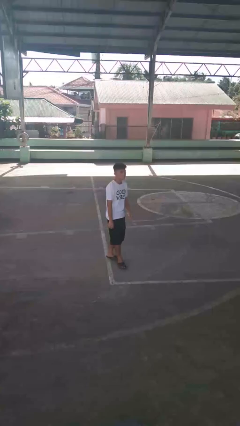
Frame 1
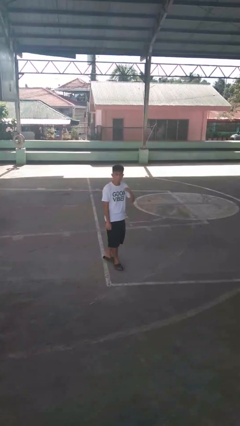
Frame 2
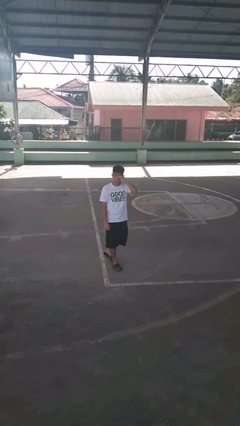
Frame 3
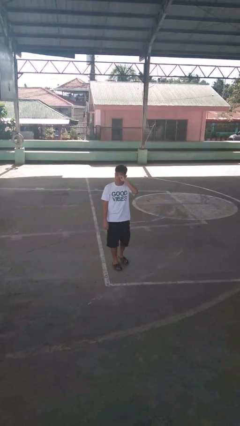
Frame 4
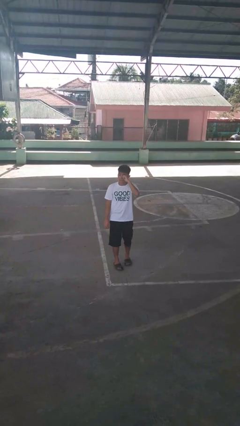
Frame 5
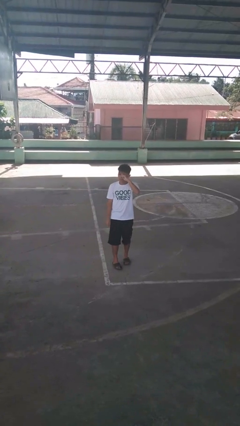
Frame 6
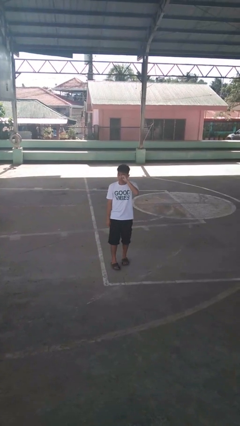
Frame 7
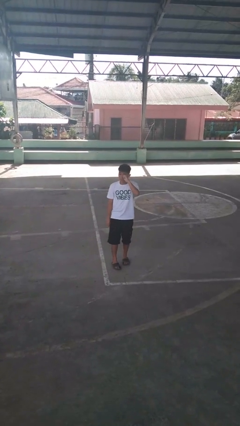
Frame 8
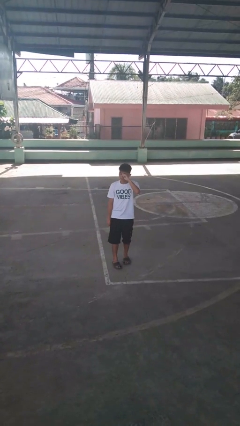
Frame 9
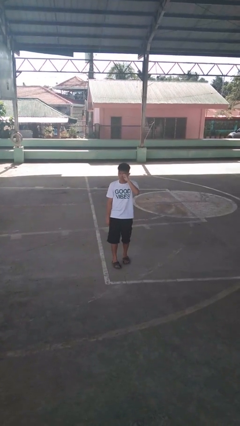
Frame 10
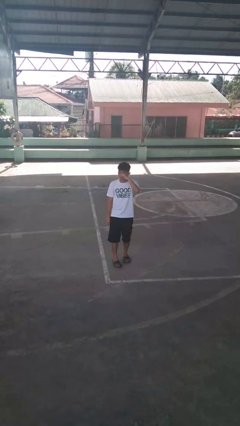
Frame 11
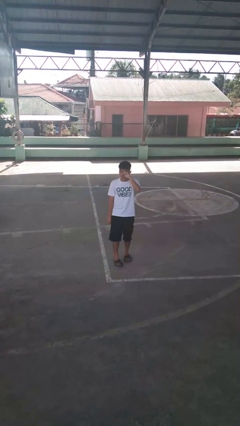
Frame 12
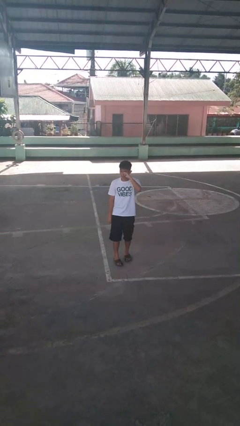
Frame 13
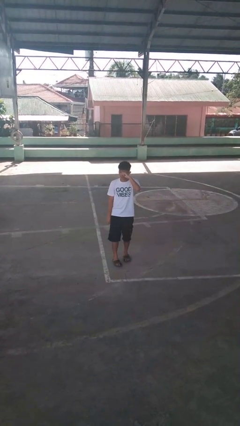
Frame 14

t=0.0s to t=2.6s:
person rubs eyes

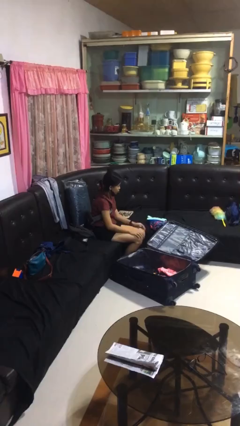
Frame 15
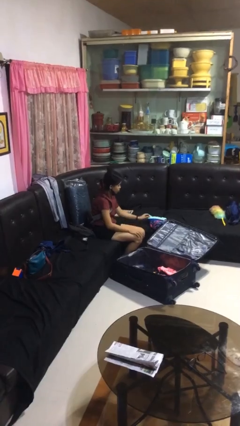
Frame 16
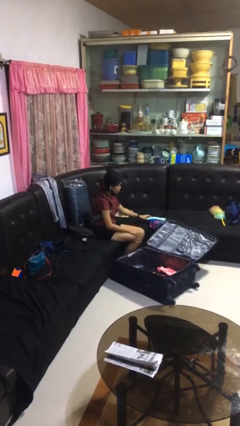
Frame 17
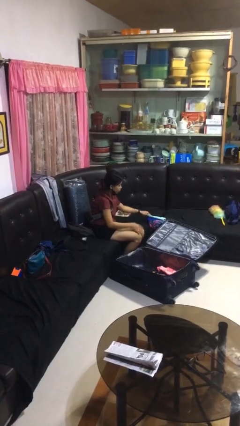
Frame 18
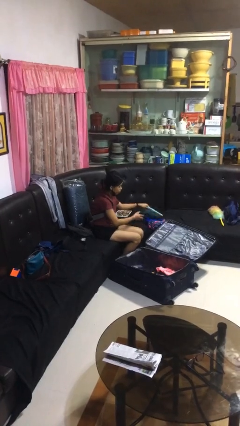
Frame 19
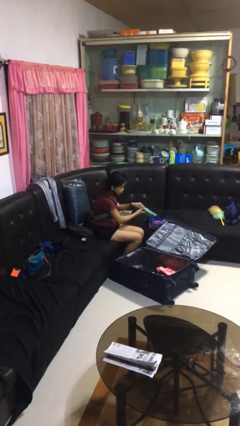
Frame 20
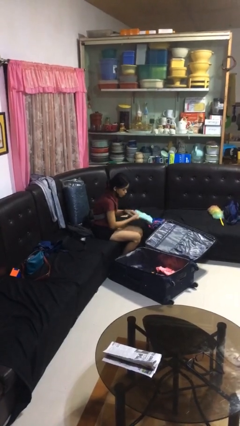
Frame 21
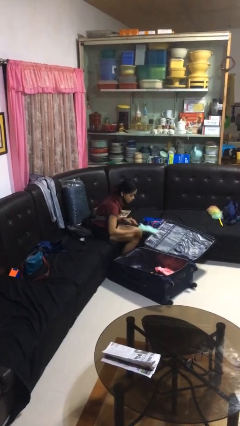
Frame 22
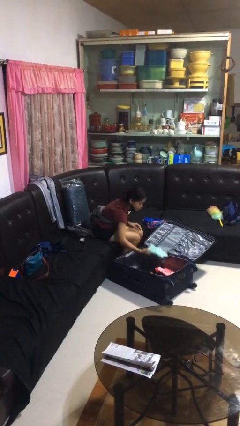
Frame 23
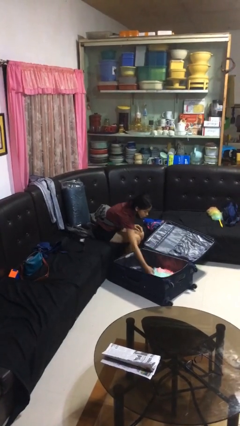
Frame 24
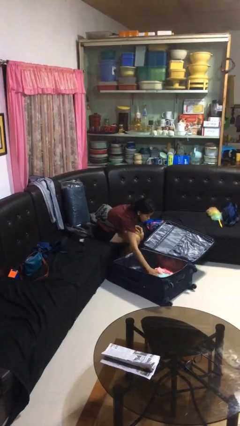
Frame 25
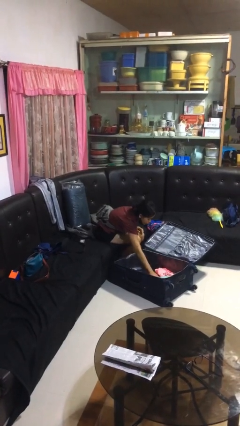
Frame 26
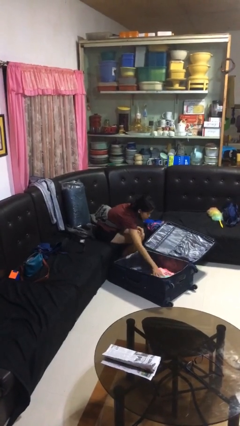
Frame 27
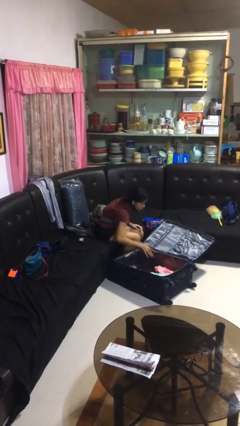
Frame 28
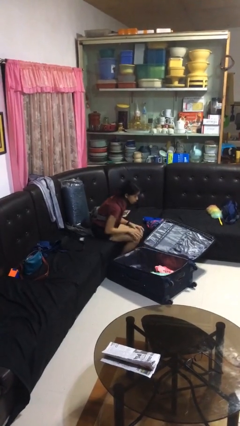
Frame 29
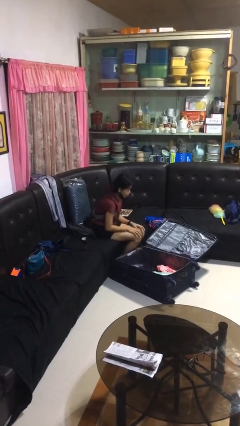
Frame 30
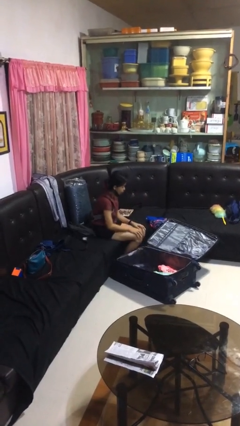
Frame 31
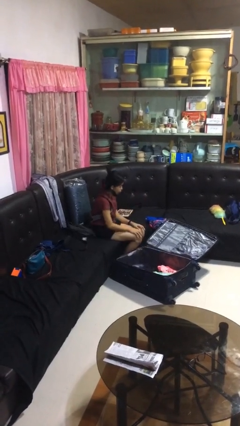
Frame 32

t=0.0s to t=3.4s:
person loads clothes into suitcase

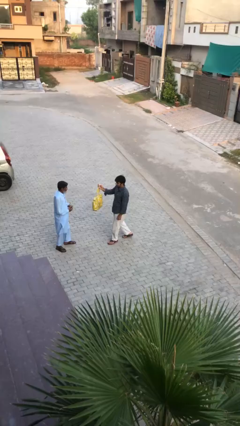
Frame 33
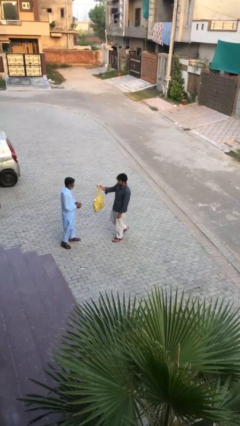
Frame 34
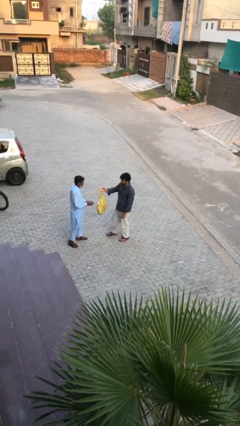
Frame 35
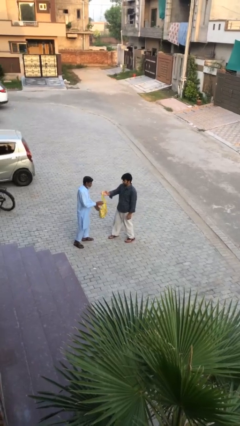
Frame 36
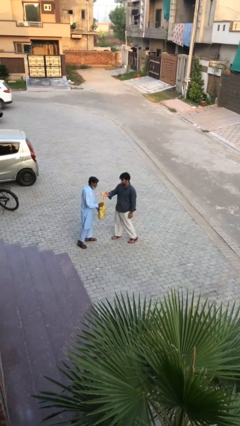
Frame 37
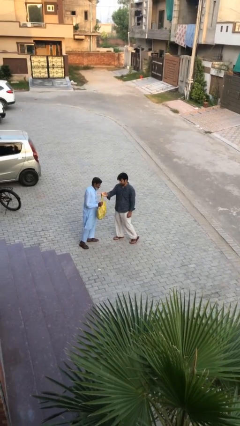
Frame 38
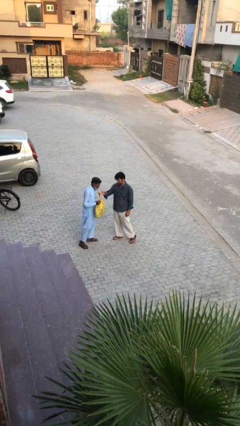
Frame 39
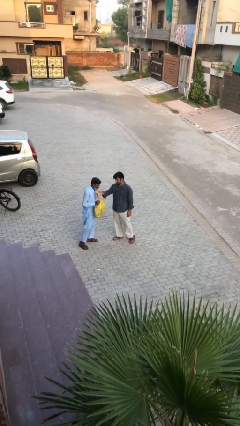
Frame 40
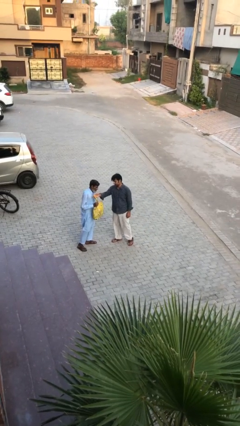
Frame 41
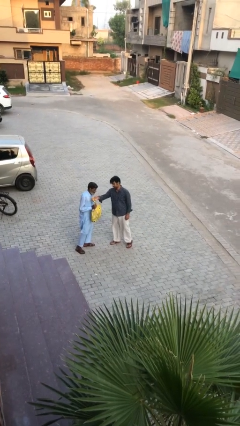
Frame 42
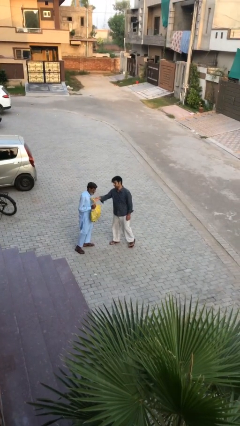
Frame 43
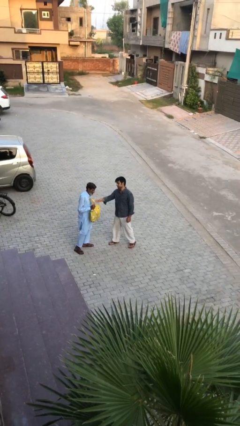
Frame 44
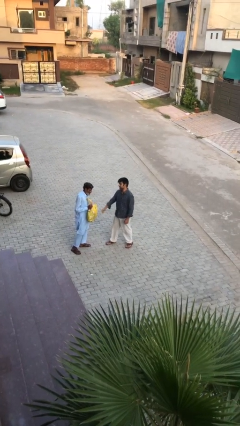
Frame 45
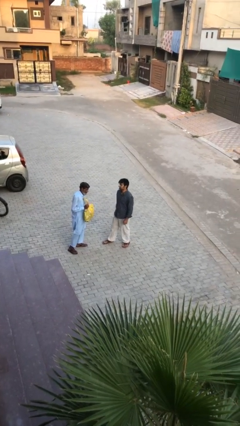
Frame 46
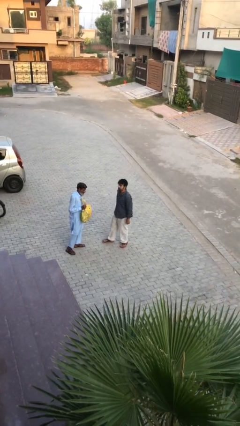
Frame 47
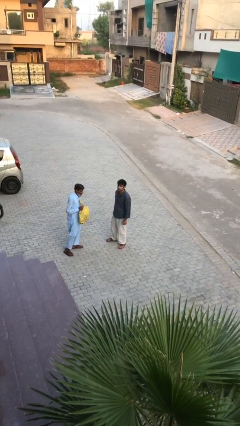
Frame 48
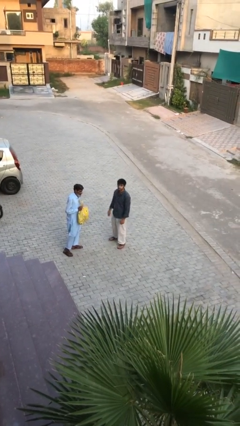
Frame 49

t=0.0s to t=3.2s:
person transfers object to person

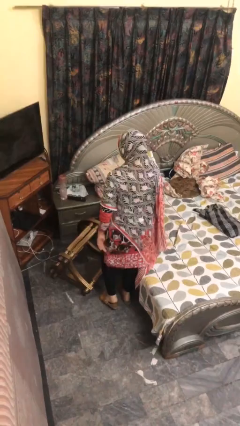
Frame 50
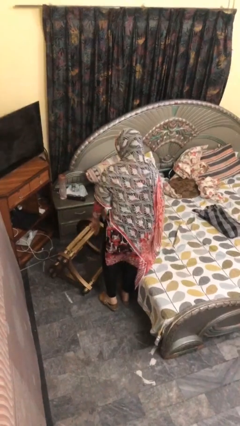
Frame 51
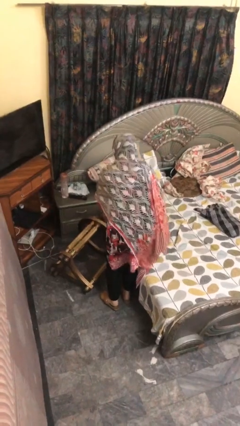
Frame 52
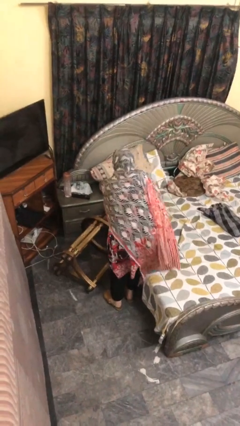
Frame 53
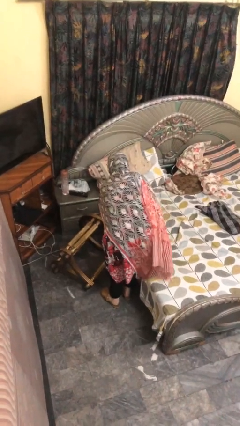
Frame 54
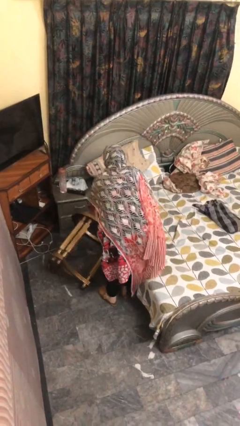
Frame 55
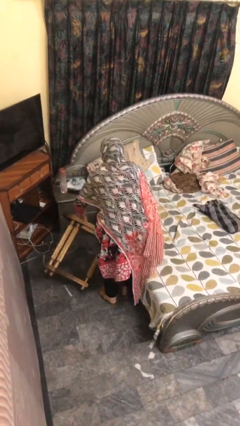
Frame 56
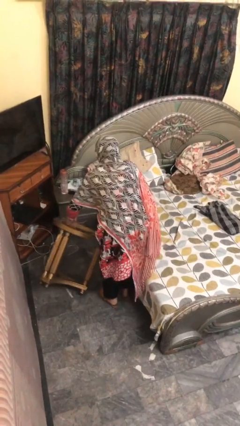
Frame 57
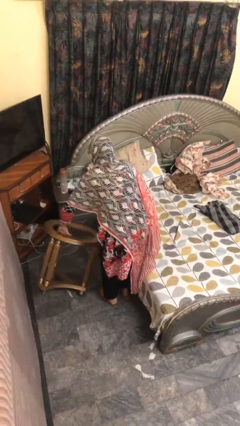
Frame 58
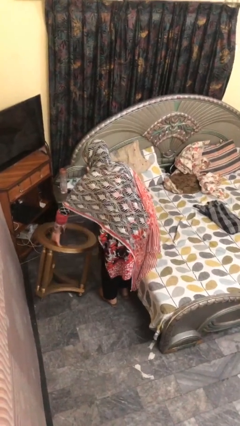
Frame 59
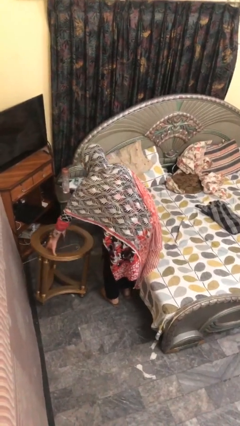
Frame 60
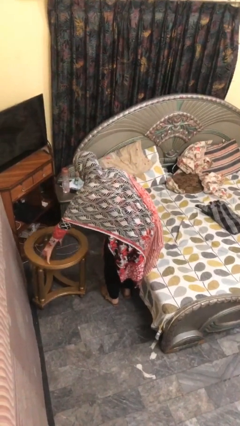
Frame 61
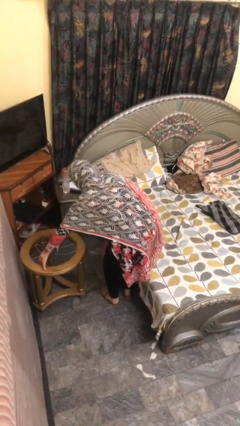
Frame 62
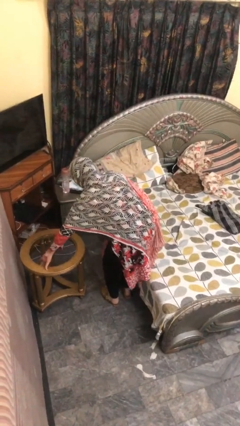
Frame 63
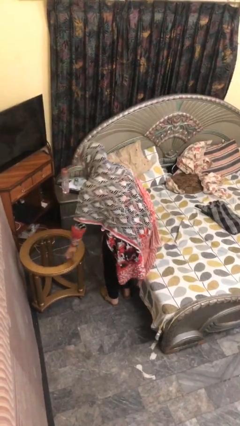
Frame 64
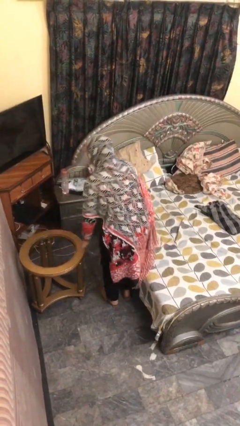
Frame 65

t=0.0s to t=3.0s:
person sets upright furniture

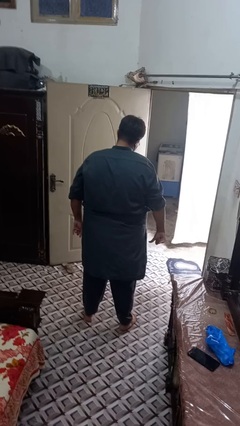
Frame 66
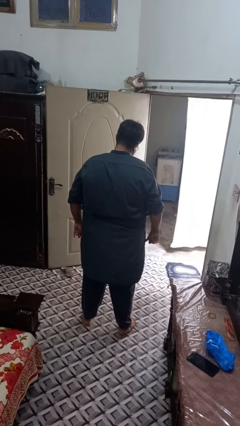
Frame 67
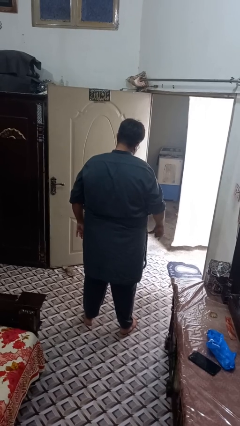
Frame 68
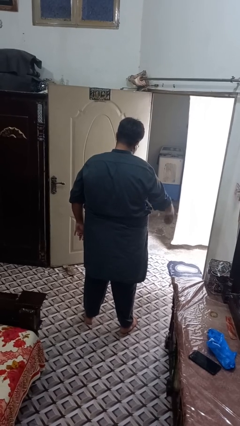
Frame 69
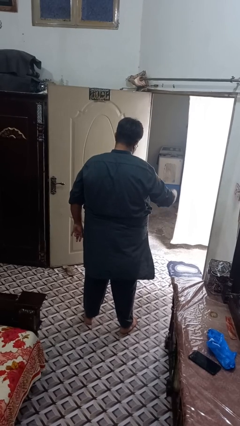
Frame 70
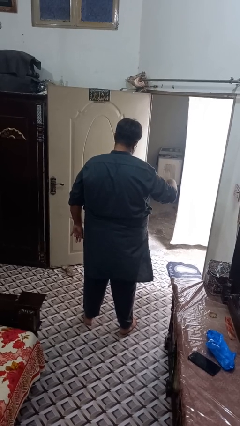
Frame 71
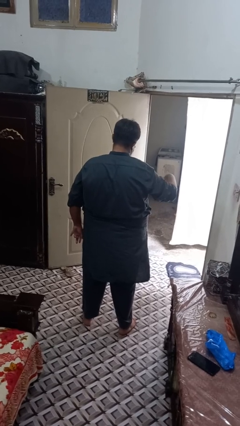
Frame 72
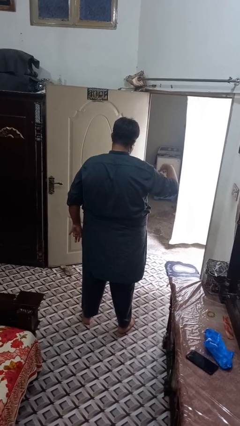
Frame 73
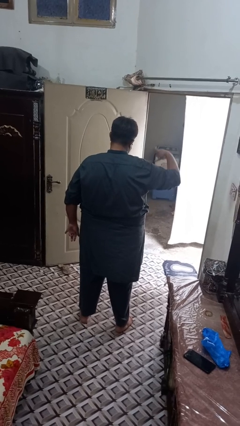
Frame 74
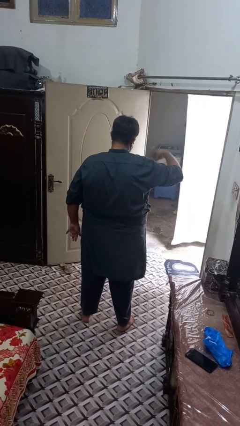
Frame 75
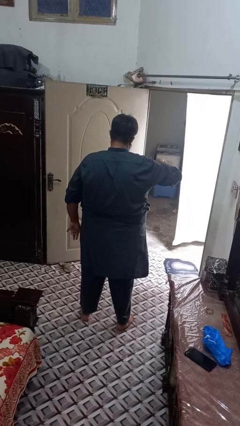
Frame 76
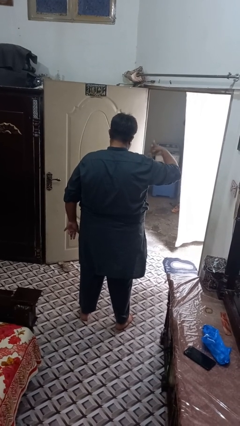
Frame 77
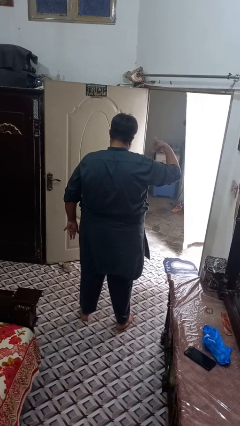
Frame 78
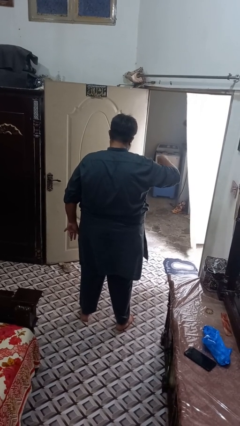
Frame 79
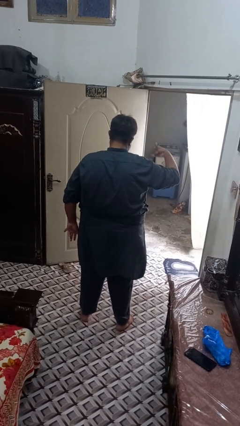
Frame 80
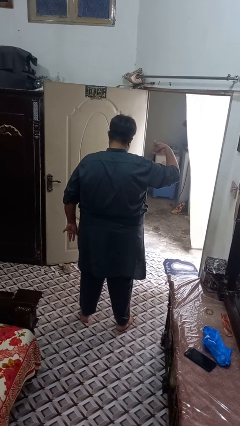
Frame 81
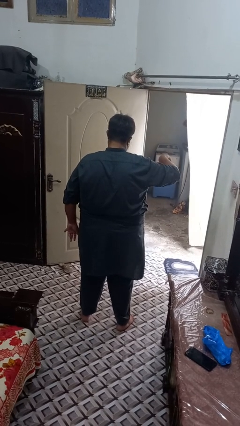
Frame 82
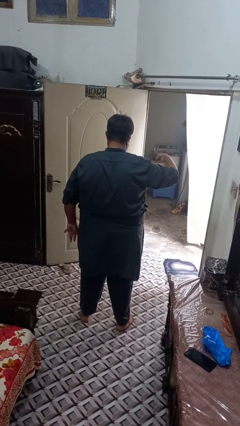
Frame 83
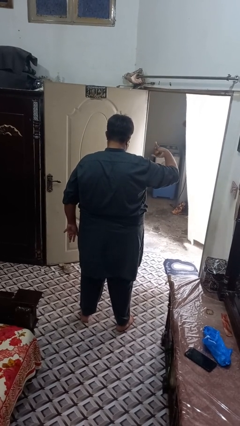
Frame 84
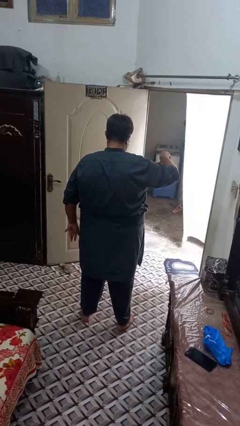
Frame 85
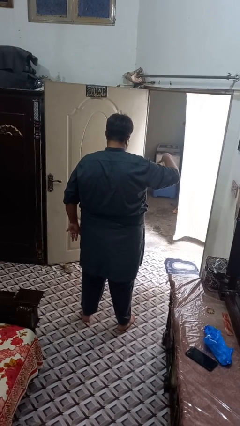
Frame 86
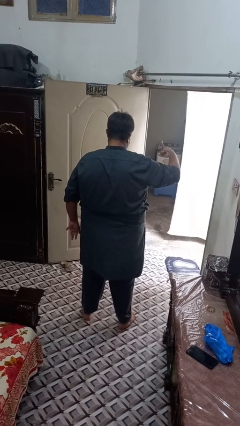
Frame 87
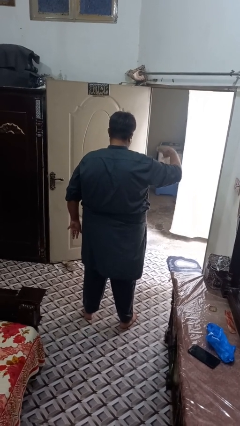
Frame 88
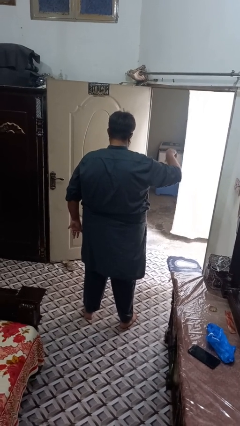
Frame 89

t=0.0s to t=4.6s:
person gestures hang loose

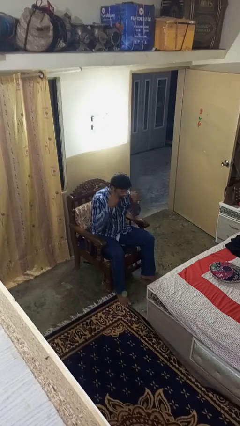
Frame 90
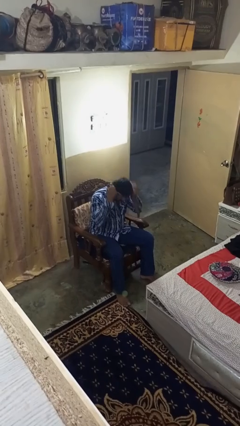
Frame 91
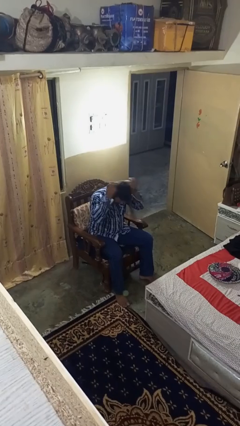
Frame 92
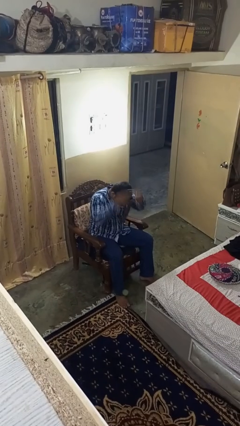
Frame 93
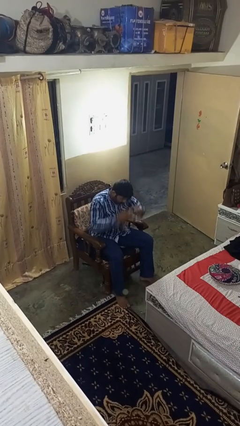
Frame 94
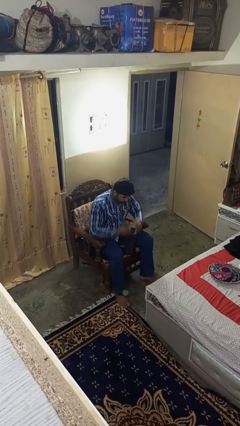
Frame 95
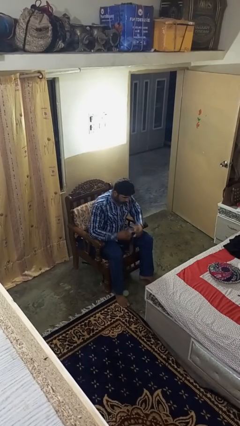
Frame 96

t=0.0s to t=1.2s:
person takes off necktie
